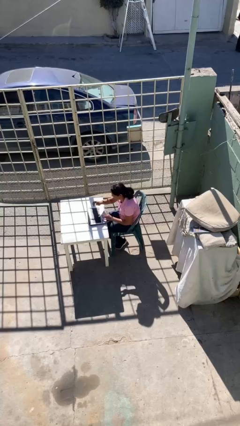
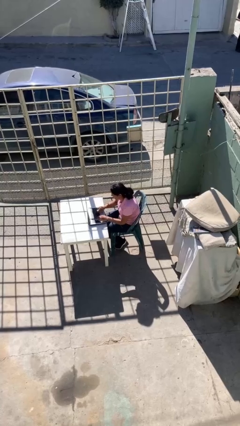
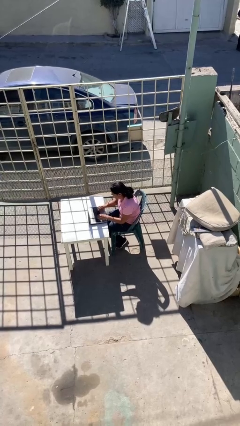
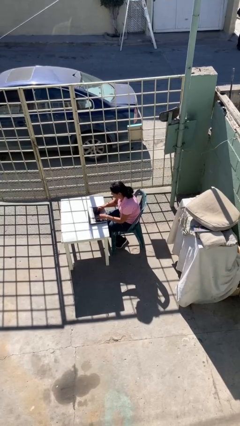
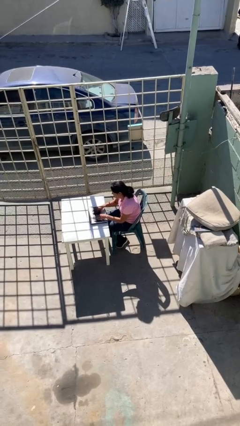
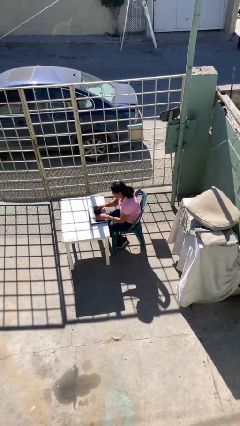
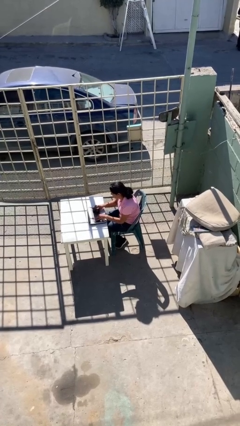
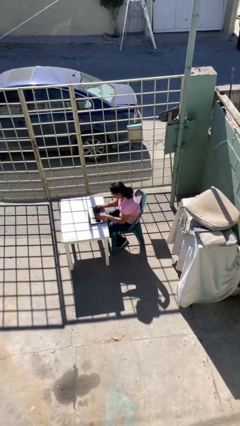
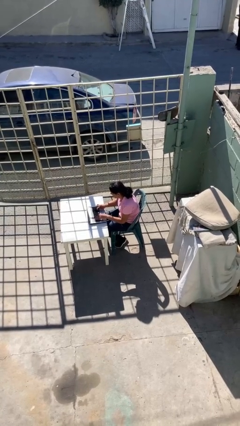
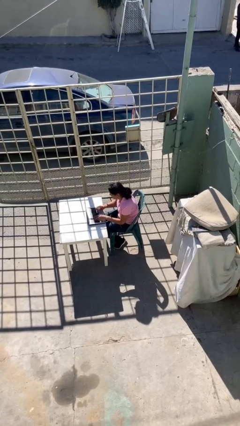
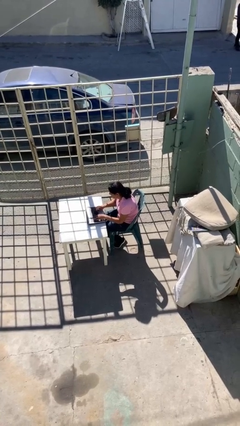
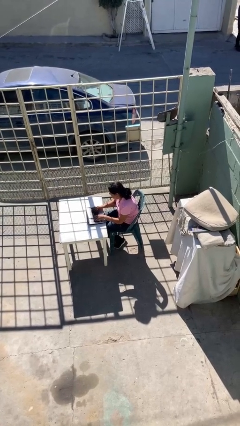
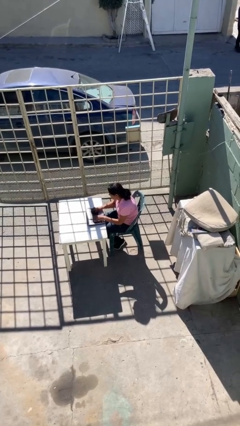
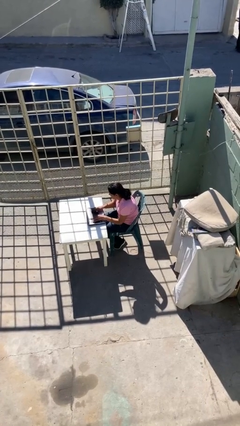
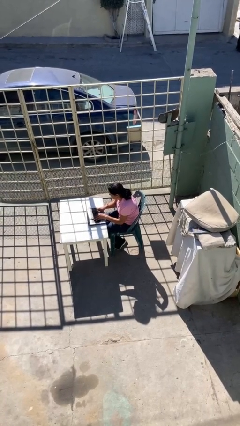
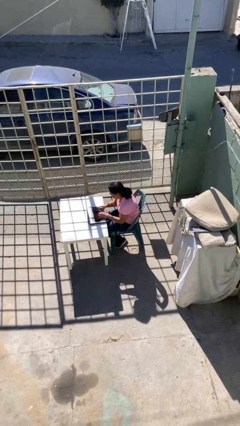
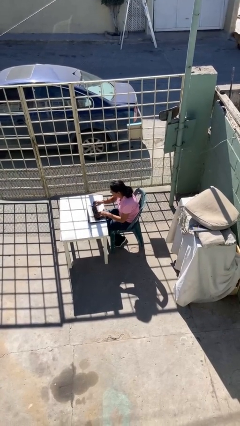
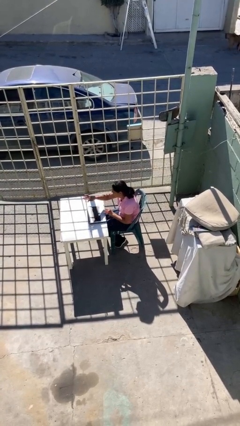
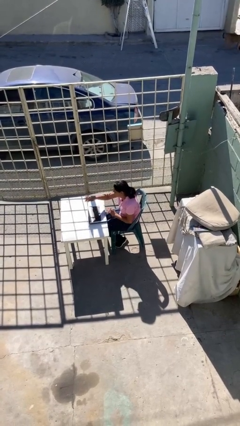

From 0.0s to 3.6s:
person interacts with laptop

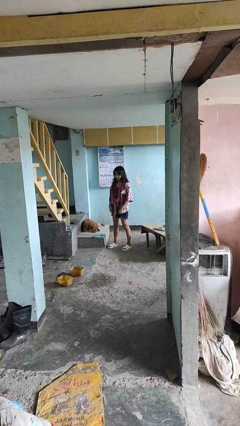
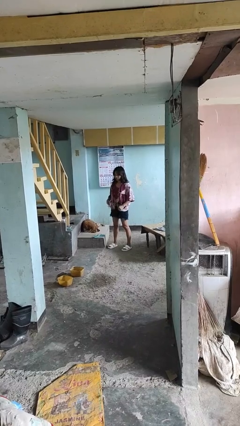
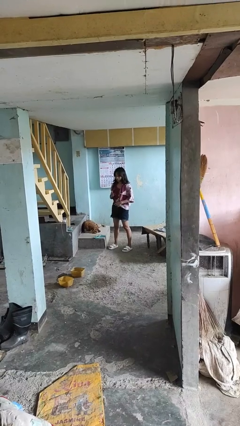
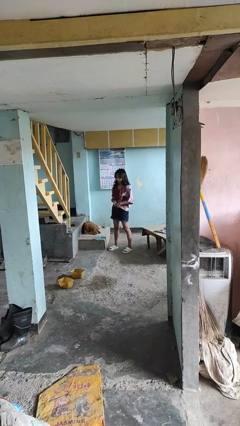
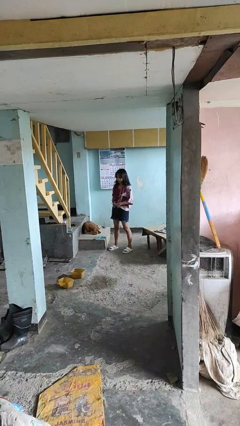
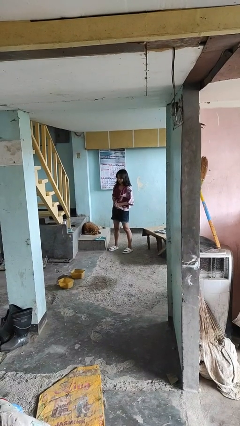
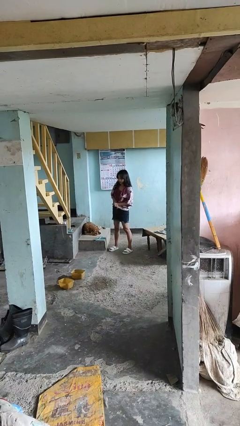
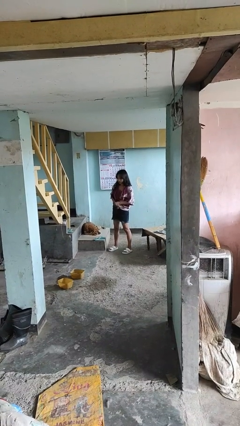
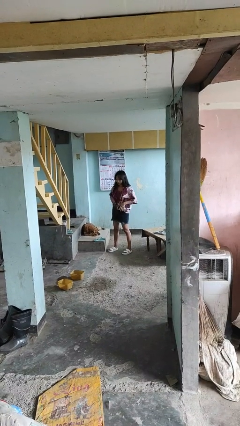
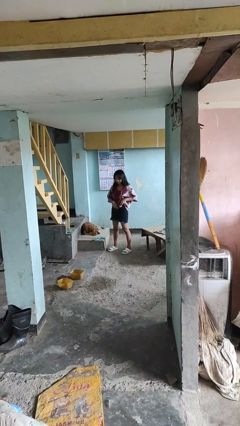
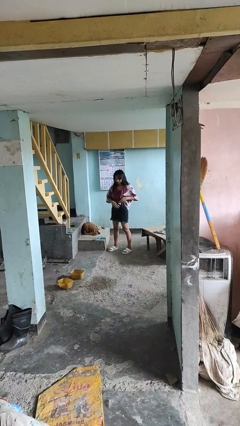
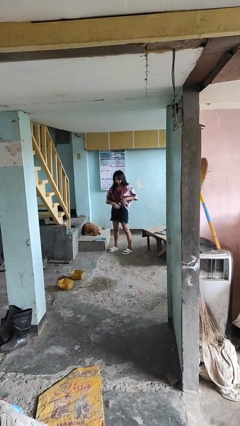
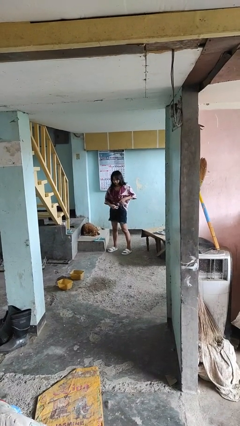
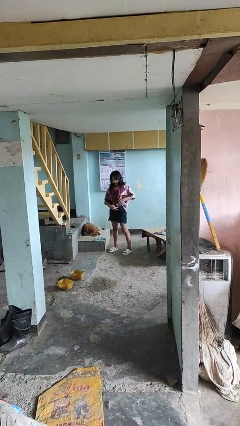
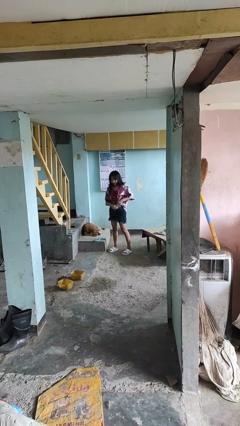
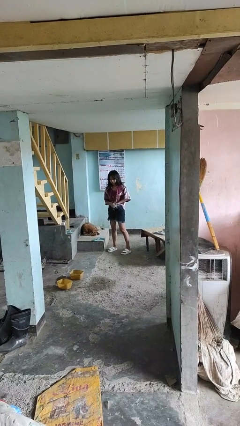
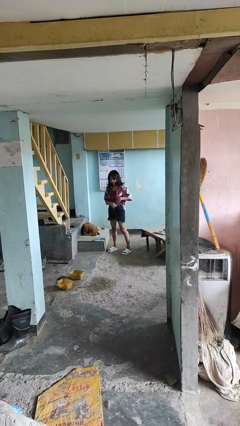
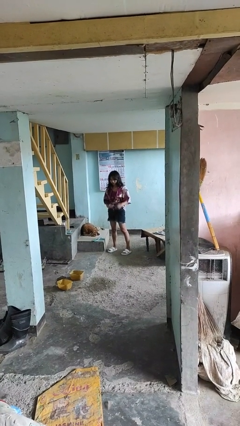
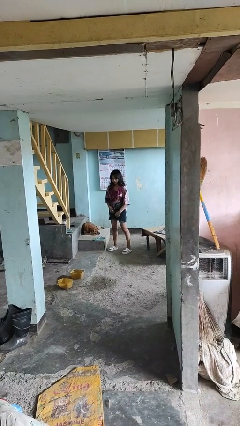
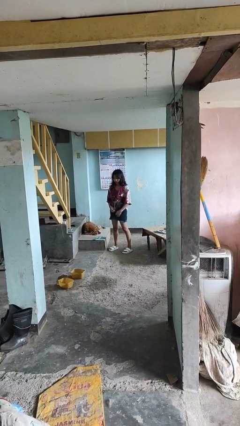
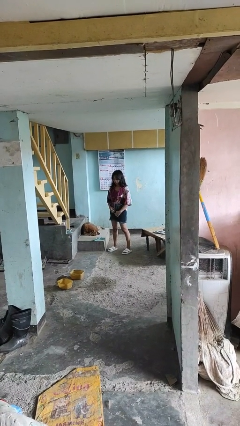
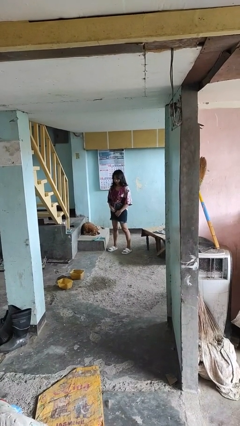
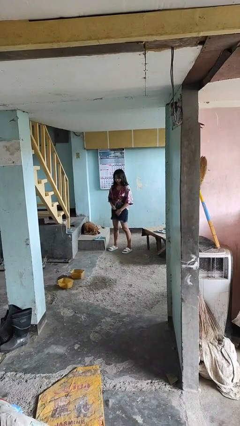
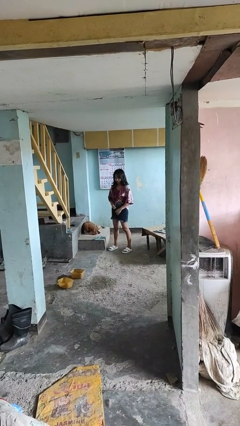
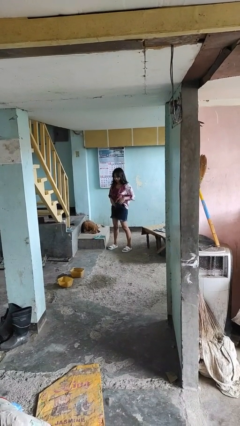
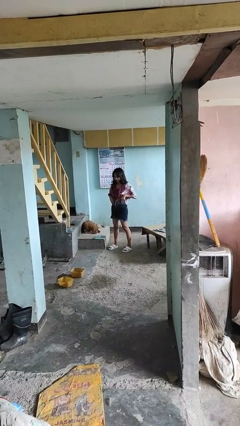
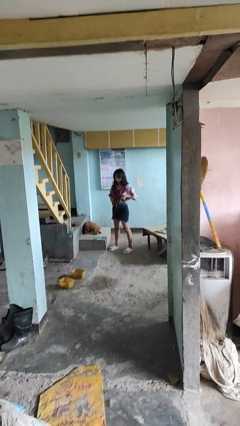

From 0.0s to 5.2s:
person tucks in shirt

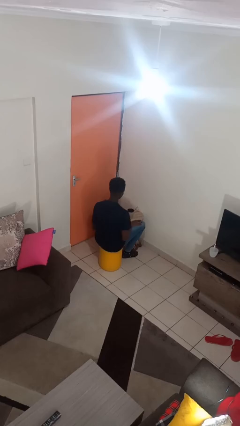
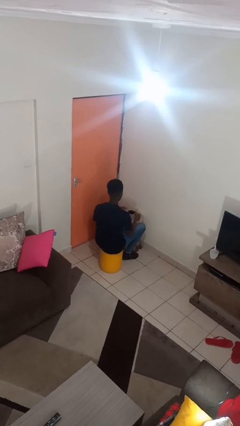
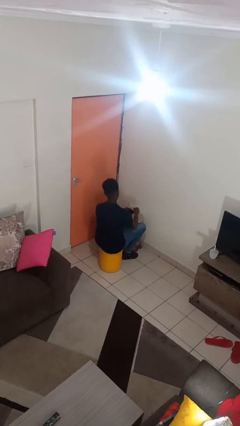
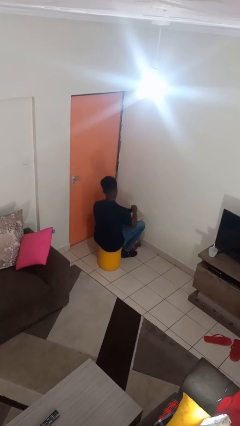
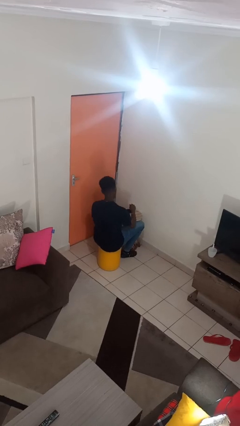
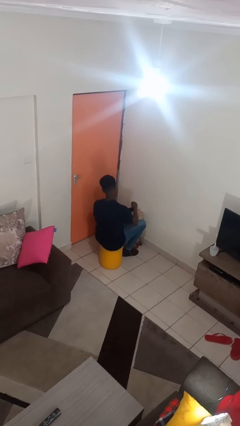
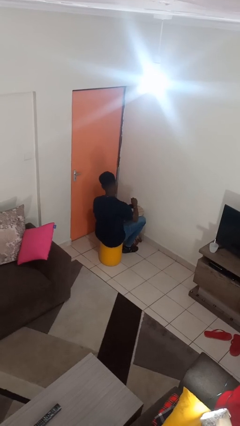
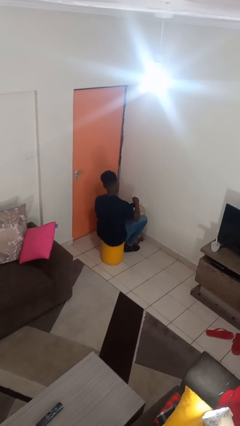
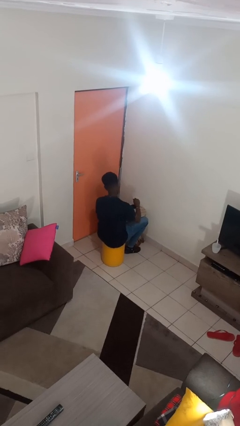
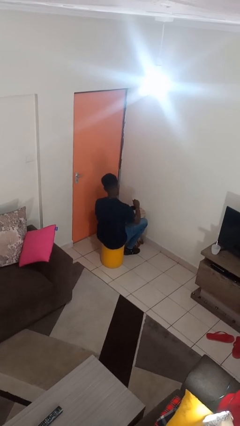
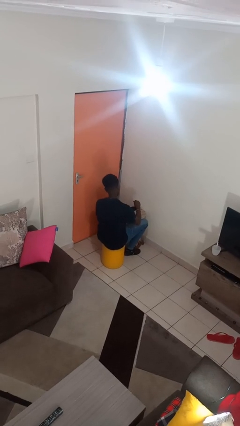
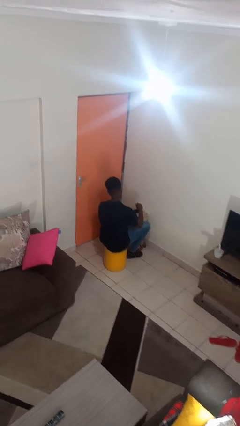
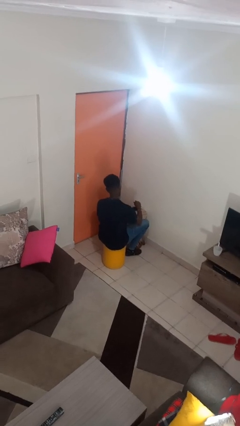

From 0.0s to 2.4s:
person stirs mug

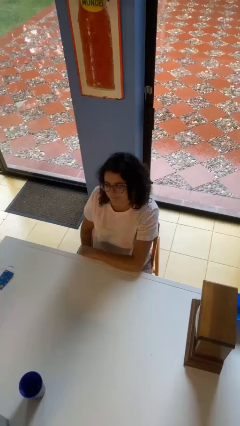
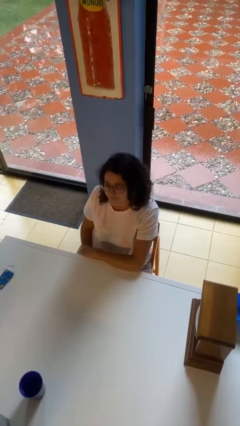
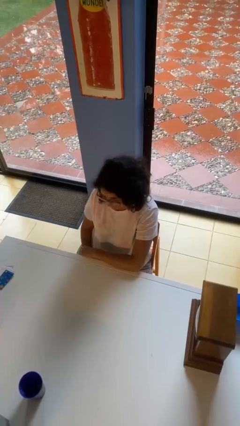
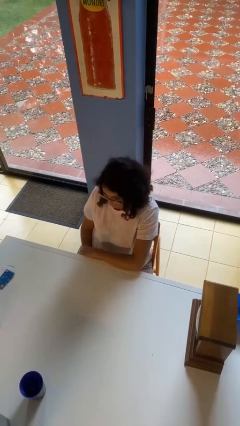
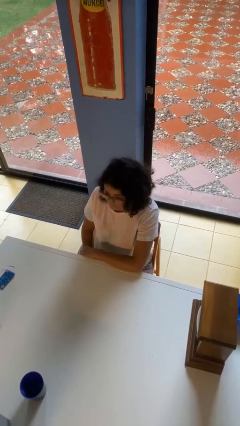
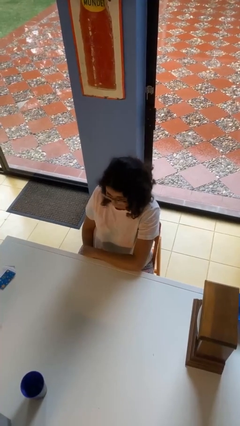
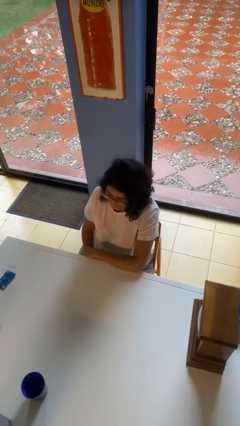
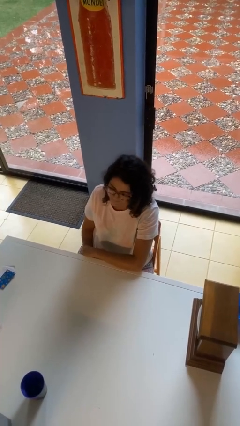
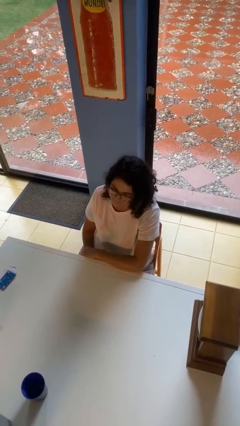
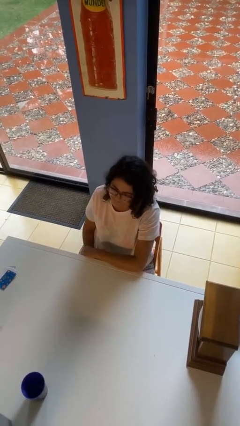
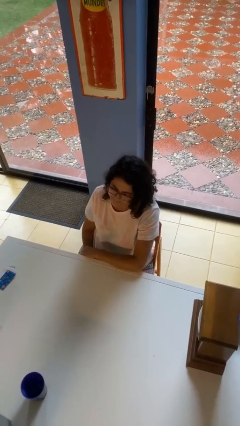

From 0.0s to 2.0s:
person nods head

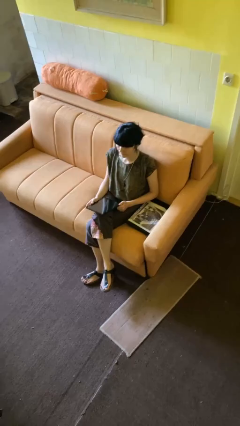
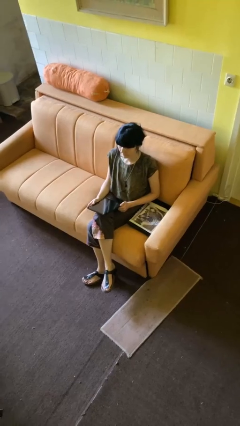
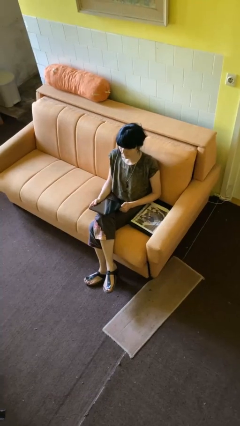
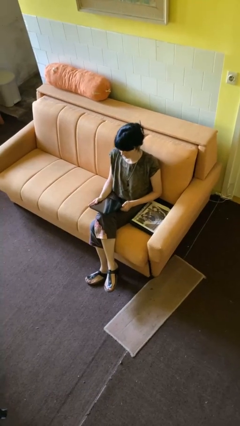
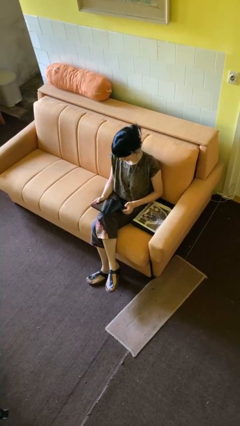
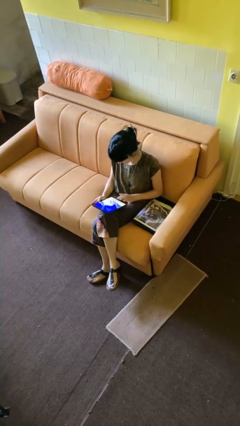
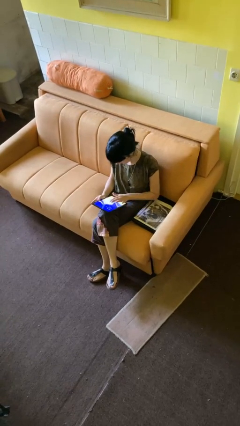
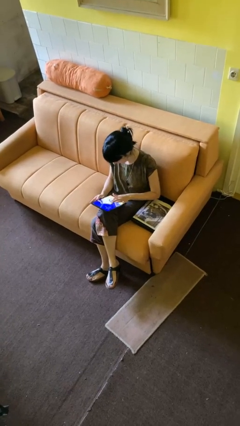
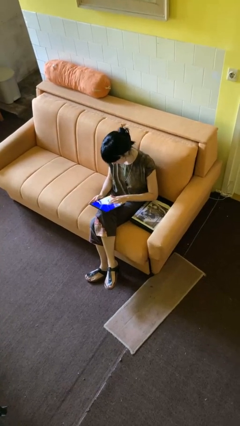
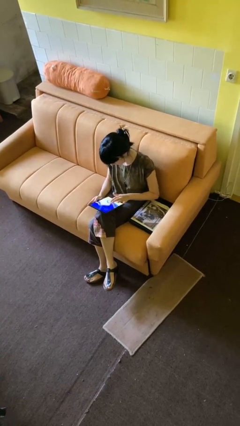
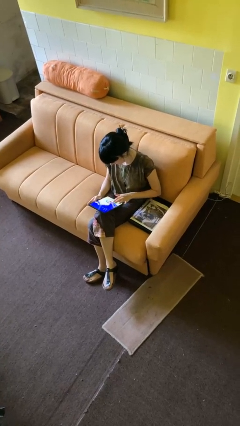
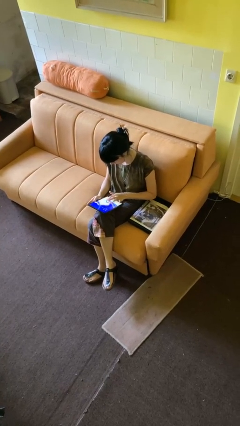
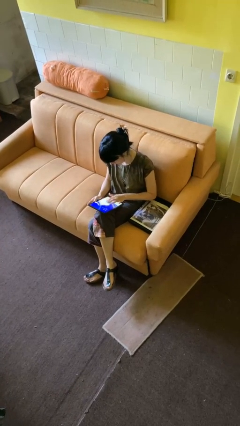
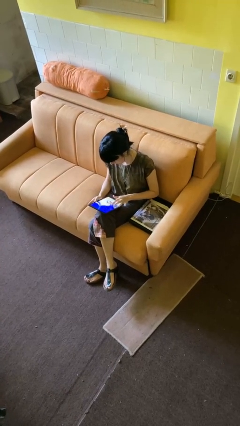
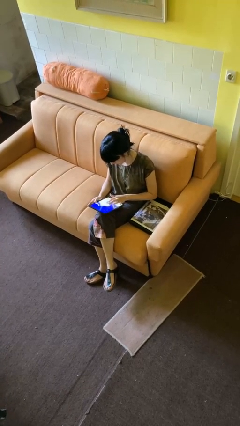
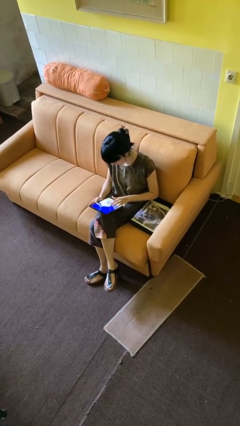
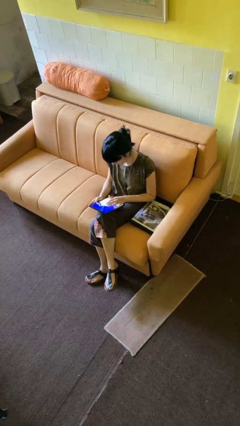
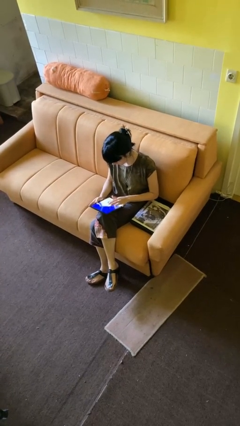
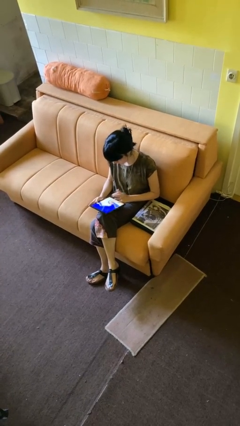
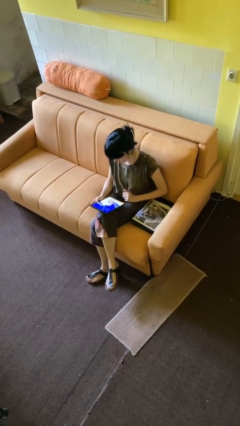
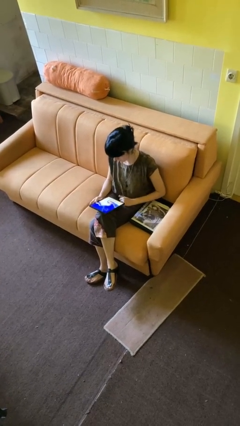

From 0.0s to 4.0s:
person interacts with tablet

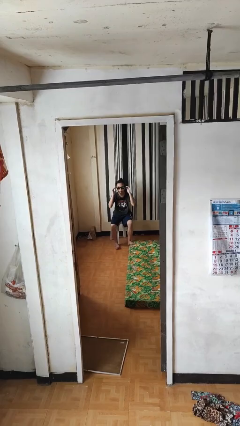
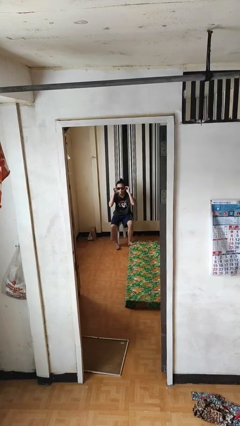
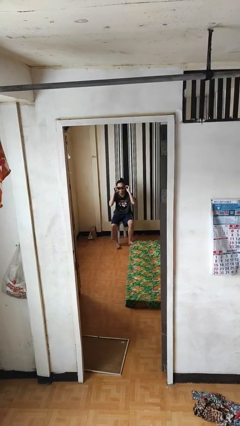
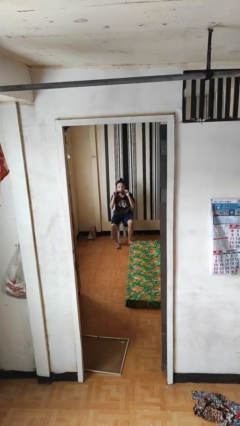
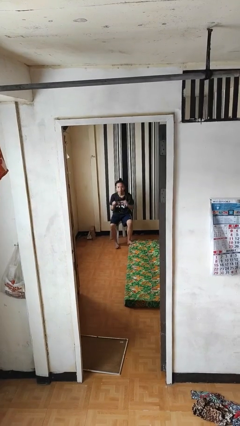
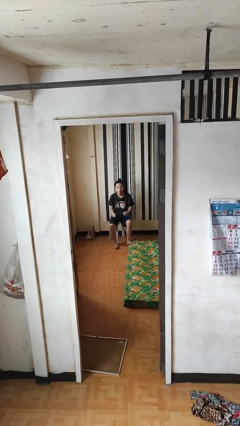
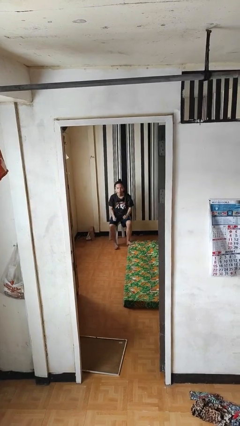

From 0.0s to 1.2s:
person takes off sunglasses
